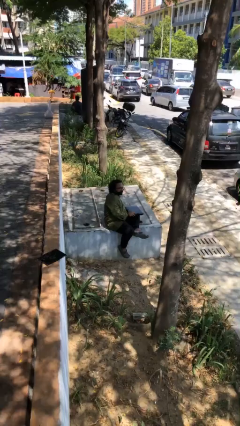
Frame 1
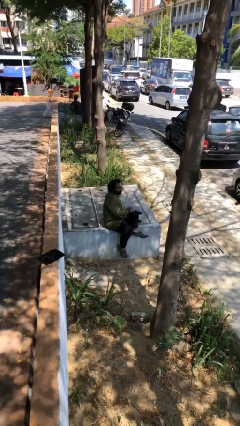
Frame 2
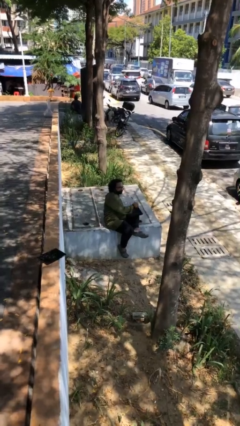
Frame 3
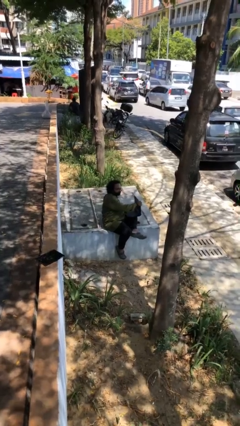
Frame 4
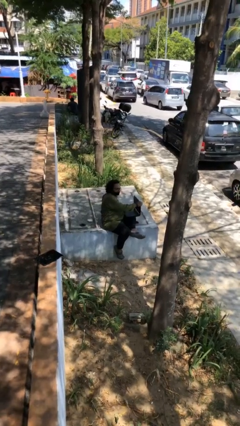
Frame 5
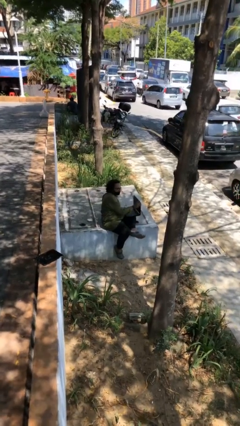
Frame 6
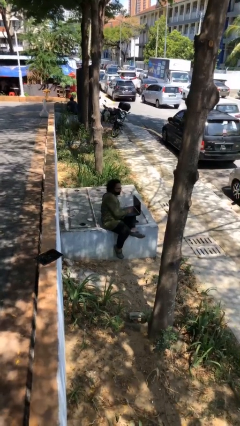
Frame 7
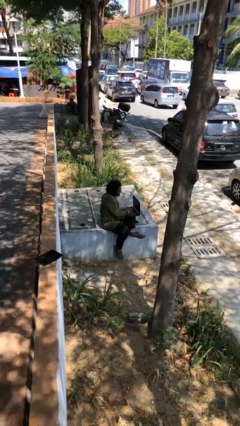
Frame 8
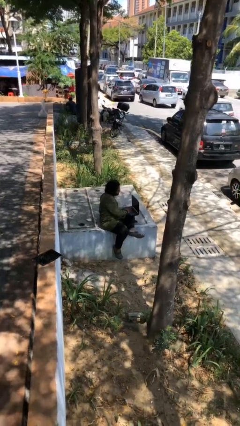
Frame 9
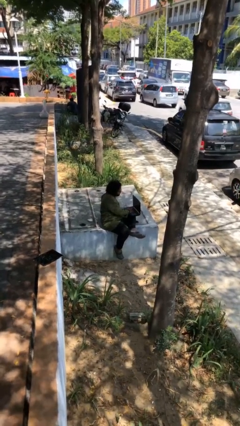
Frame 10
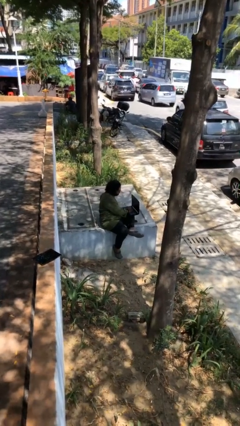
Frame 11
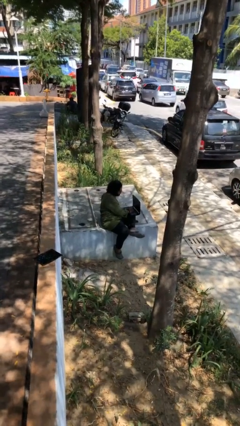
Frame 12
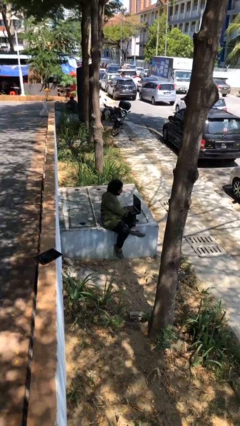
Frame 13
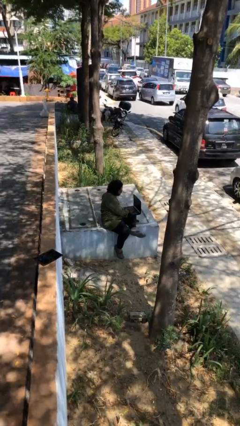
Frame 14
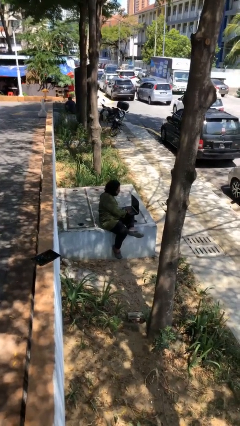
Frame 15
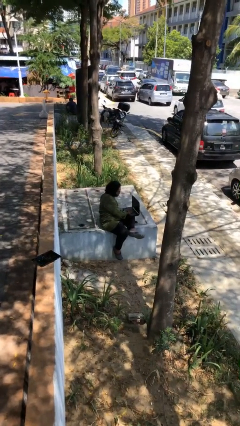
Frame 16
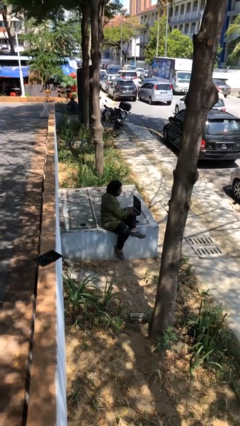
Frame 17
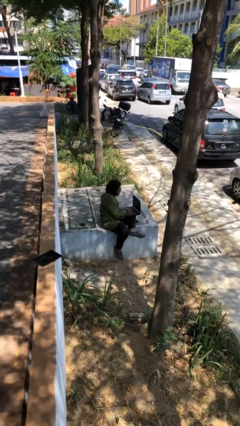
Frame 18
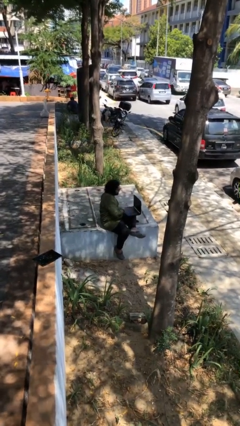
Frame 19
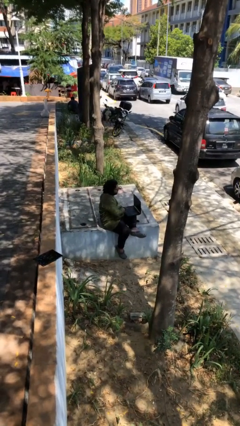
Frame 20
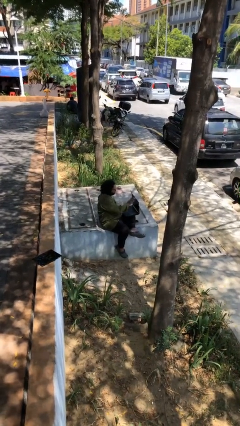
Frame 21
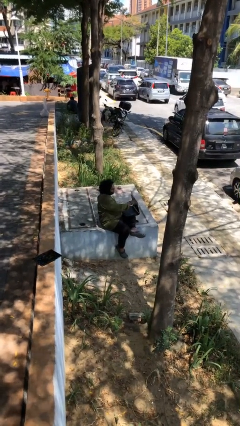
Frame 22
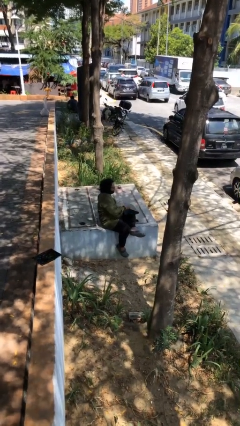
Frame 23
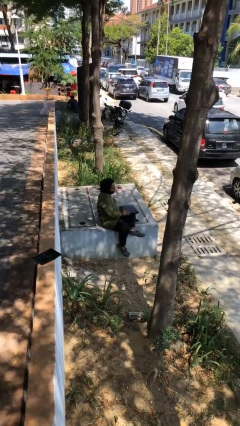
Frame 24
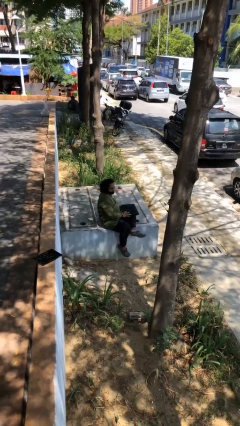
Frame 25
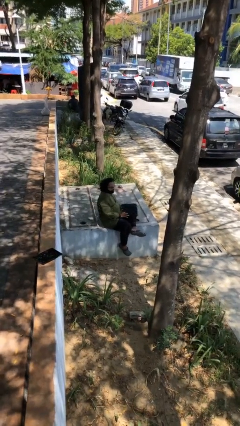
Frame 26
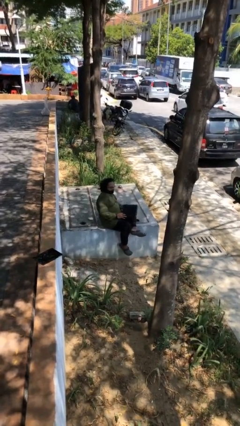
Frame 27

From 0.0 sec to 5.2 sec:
person interacts with laptop

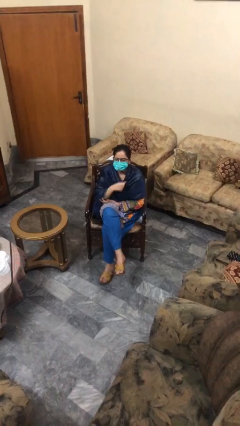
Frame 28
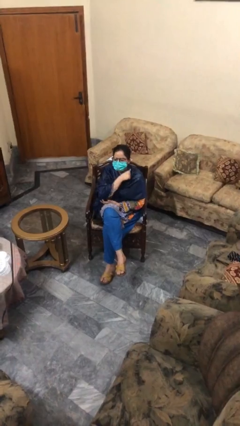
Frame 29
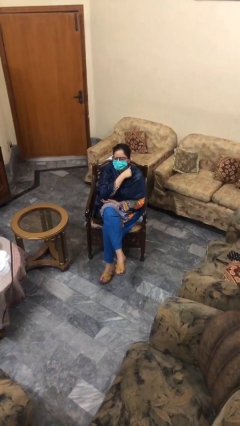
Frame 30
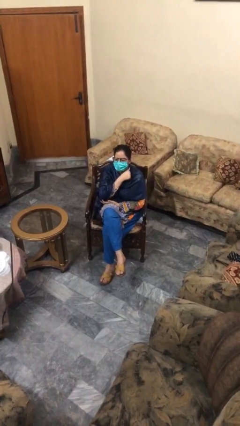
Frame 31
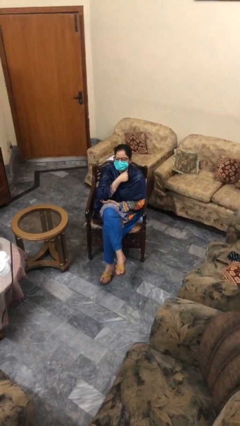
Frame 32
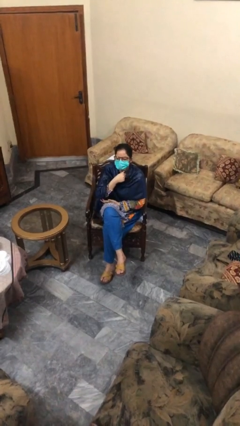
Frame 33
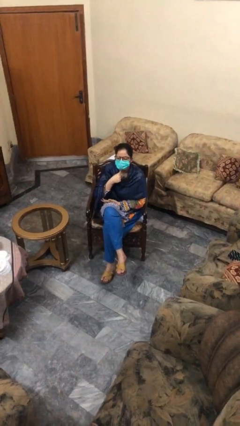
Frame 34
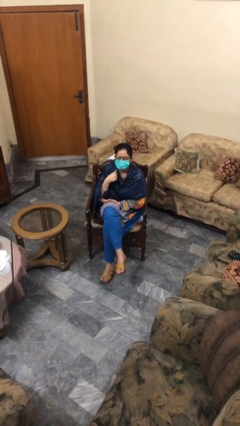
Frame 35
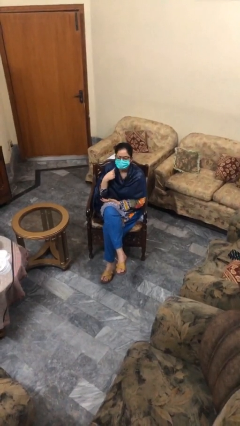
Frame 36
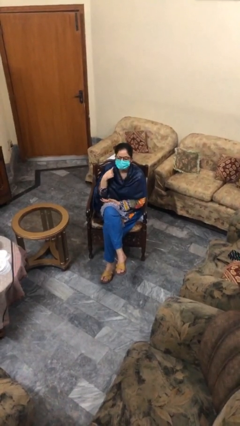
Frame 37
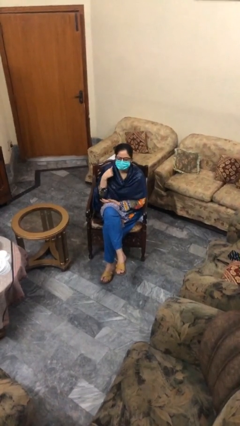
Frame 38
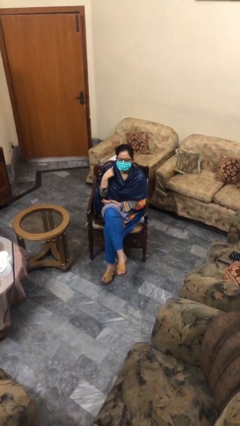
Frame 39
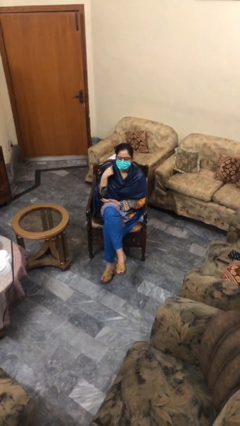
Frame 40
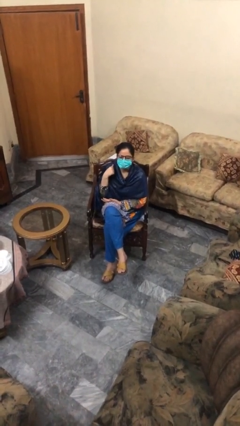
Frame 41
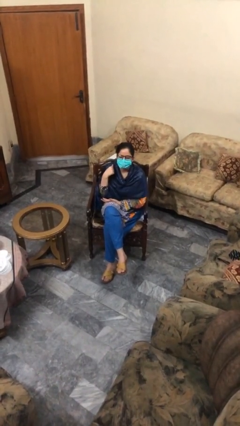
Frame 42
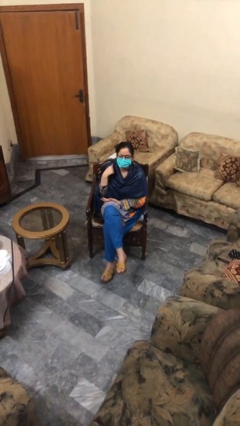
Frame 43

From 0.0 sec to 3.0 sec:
person gestures cut

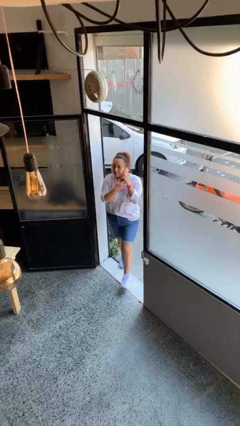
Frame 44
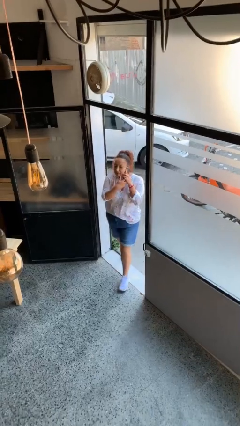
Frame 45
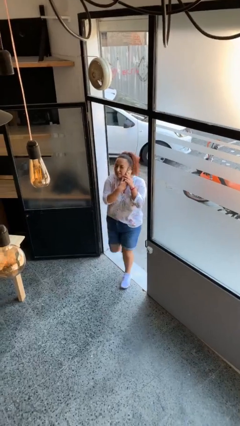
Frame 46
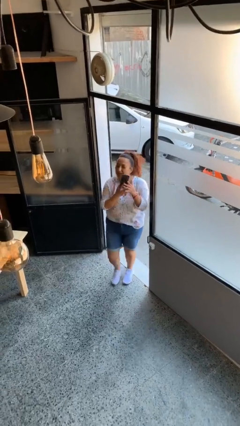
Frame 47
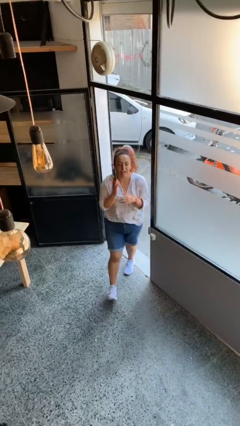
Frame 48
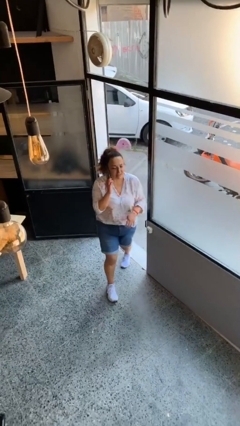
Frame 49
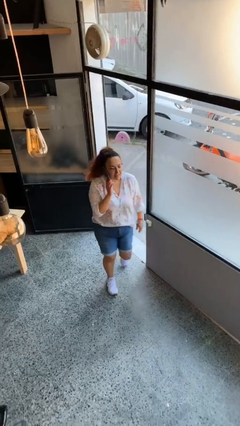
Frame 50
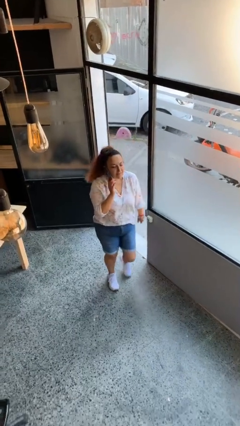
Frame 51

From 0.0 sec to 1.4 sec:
person enters scene through structure

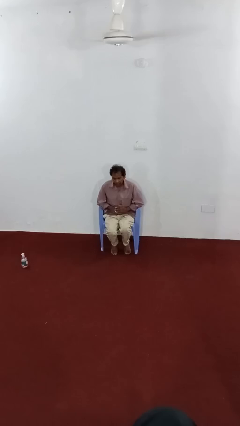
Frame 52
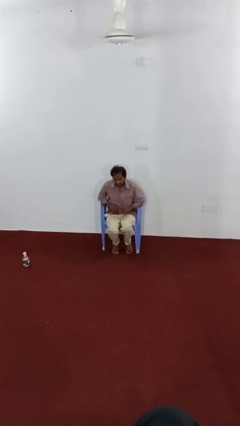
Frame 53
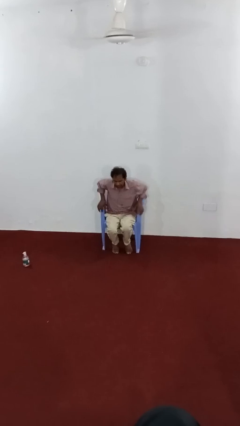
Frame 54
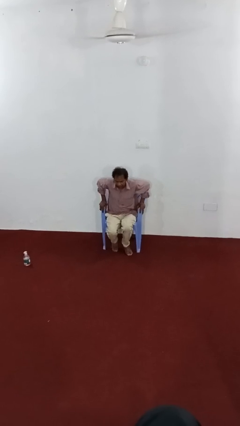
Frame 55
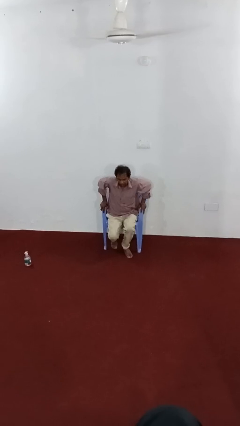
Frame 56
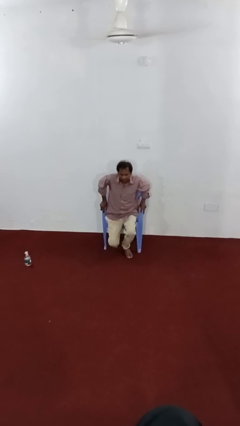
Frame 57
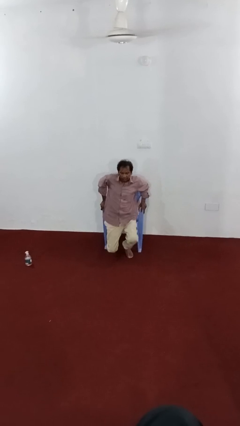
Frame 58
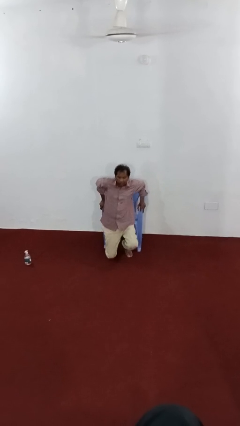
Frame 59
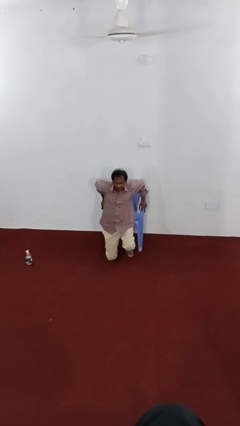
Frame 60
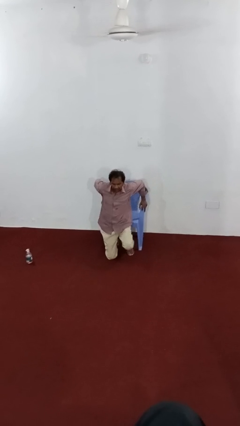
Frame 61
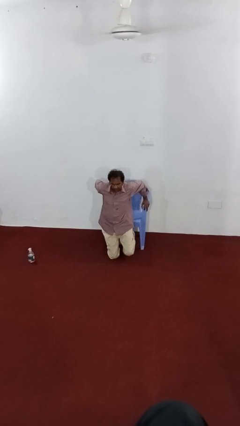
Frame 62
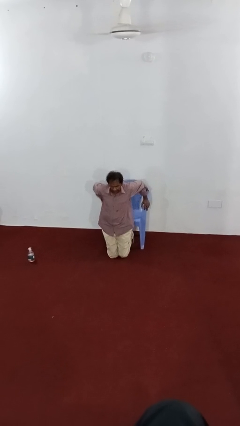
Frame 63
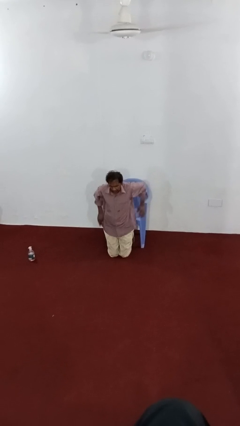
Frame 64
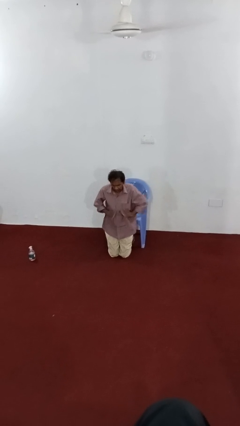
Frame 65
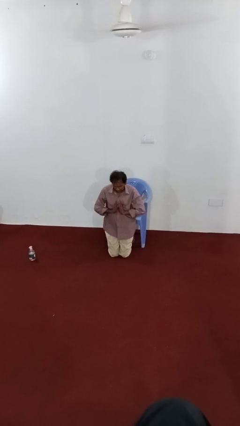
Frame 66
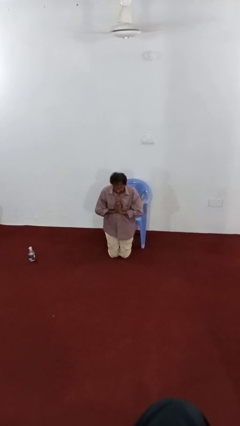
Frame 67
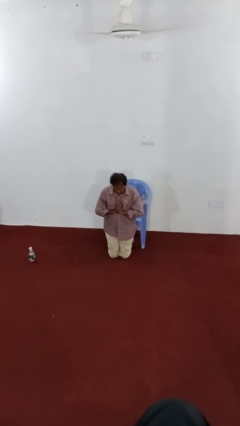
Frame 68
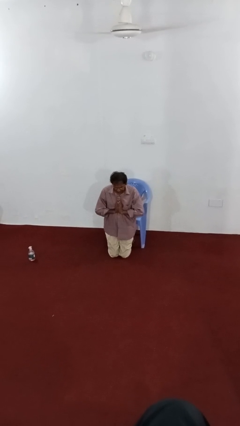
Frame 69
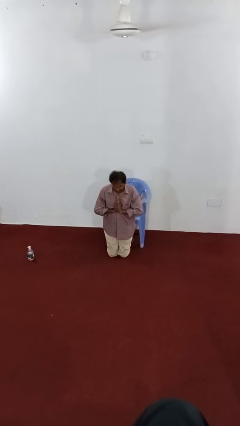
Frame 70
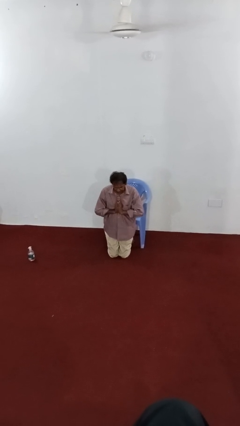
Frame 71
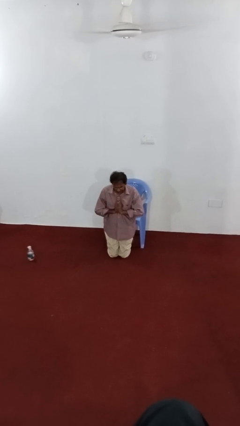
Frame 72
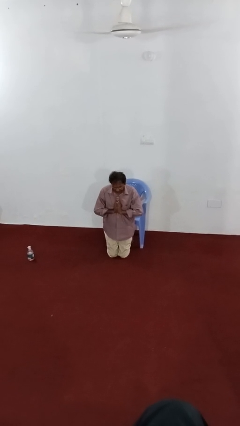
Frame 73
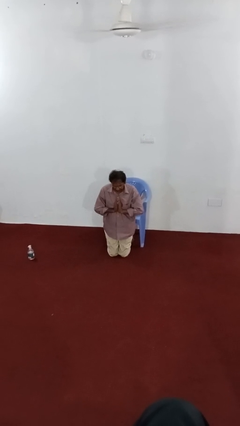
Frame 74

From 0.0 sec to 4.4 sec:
person prays

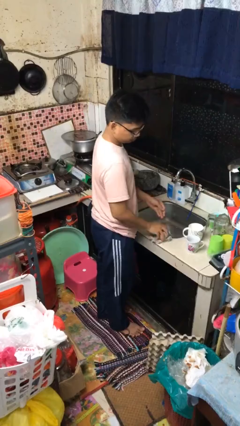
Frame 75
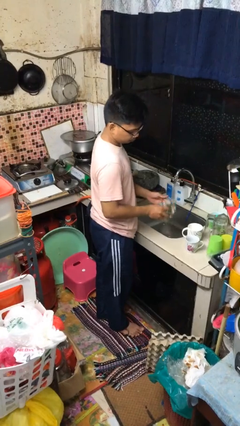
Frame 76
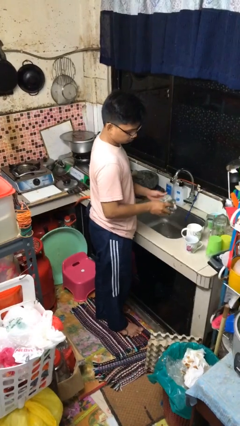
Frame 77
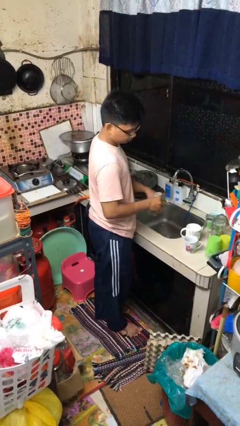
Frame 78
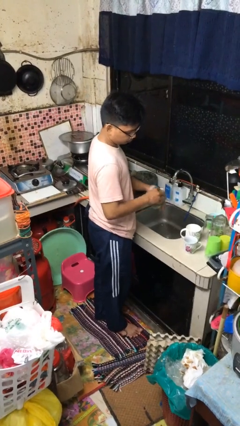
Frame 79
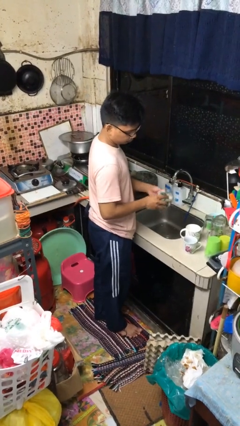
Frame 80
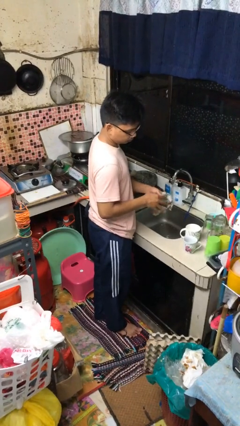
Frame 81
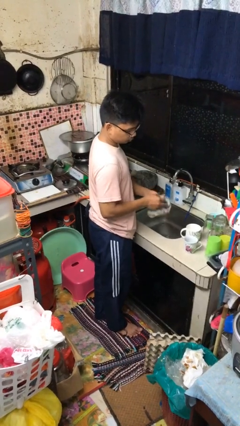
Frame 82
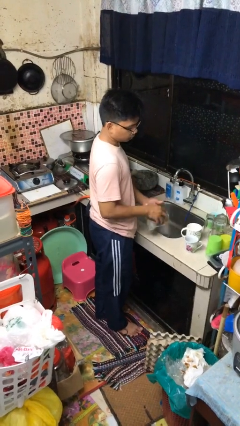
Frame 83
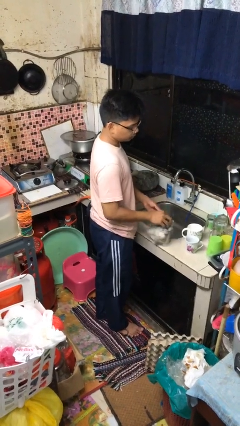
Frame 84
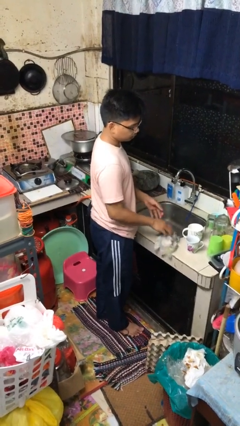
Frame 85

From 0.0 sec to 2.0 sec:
person dries hands with towel

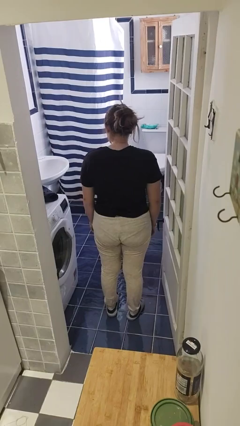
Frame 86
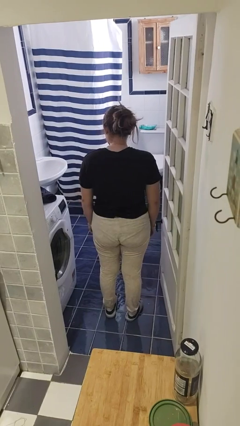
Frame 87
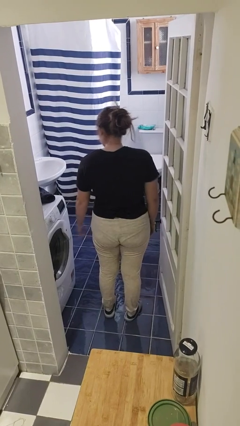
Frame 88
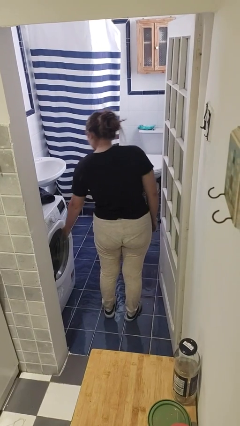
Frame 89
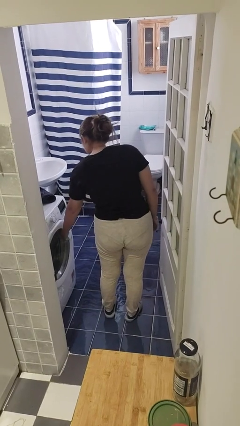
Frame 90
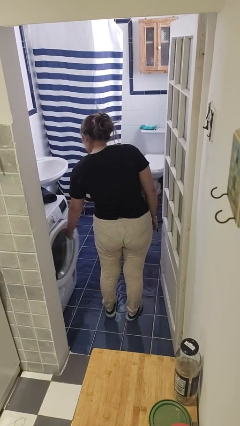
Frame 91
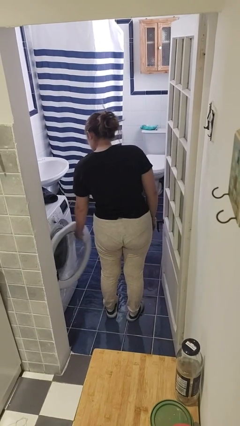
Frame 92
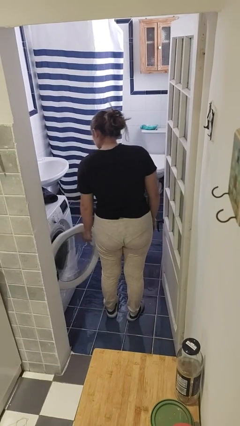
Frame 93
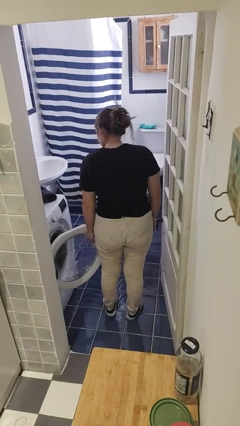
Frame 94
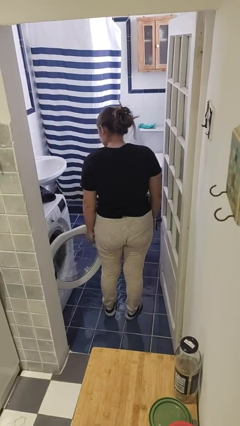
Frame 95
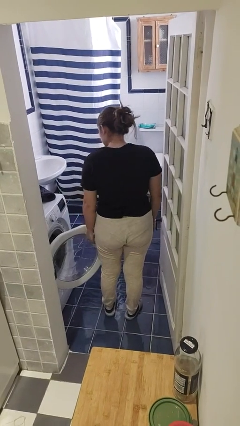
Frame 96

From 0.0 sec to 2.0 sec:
person opens clothes washer
